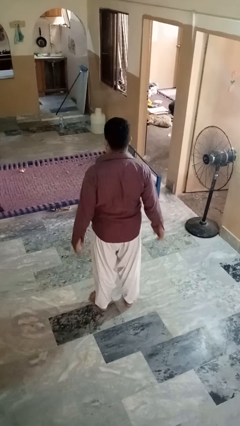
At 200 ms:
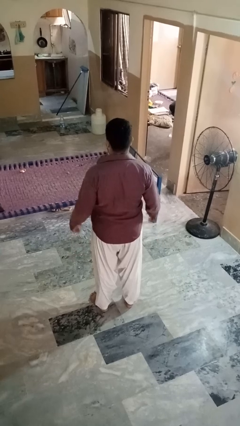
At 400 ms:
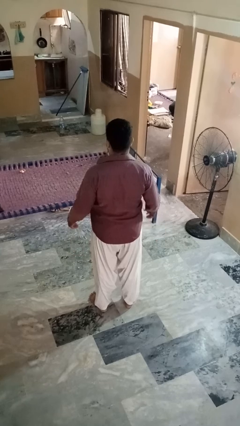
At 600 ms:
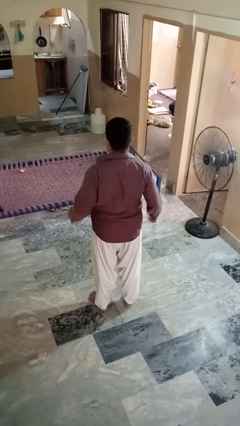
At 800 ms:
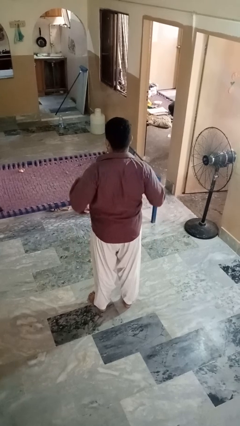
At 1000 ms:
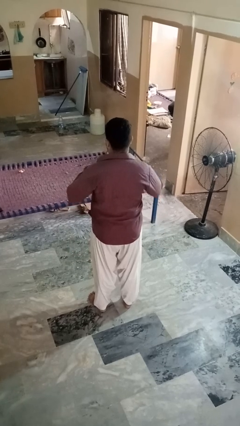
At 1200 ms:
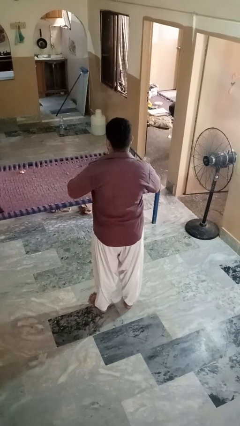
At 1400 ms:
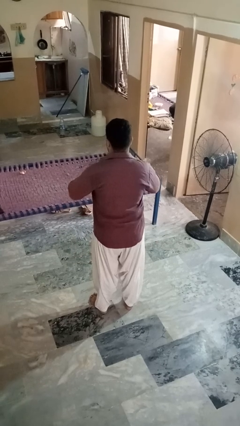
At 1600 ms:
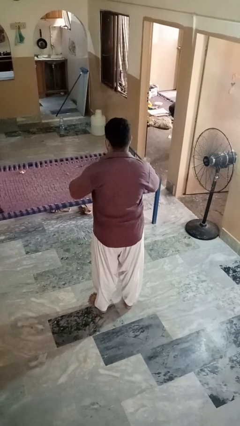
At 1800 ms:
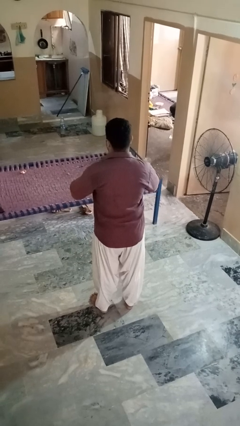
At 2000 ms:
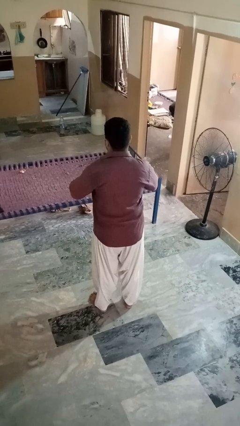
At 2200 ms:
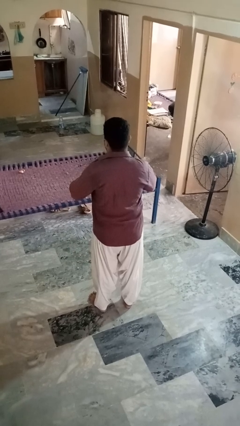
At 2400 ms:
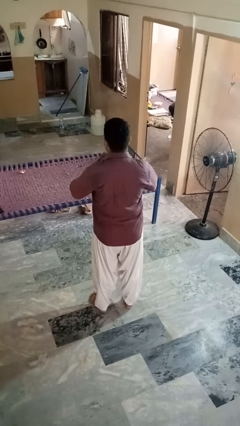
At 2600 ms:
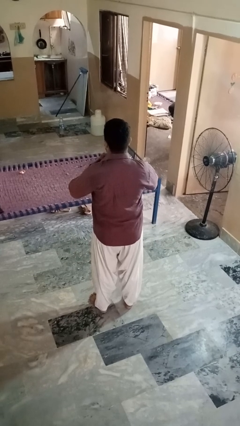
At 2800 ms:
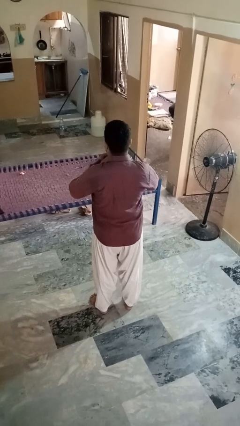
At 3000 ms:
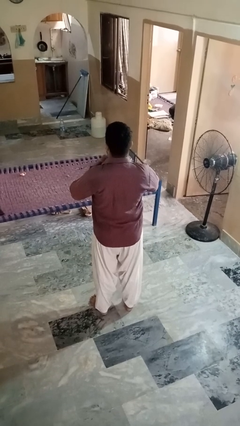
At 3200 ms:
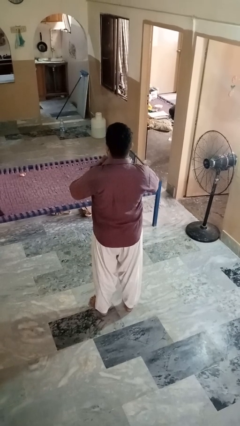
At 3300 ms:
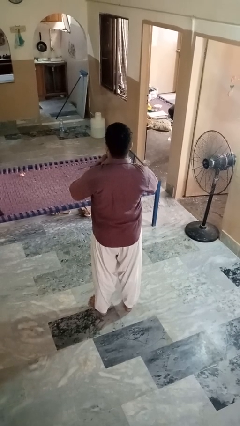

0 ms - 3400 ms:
person buttons shirt

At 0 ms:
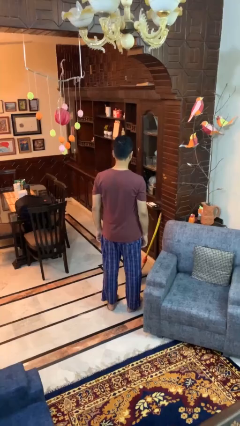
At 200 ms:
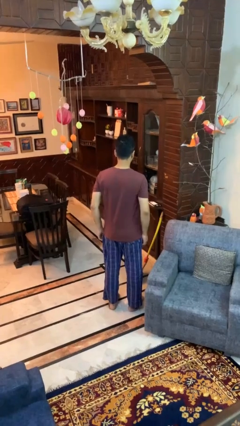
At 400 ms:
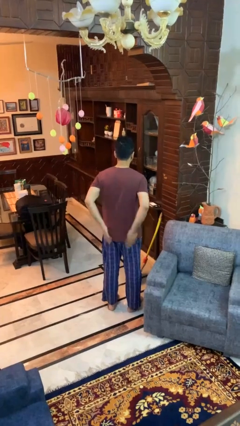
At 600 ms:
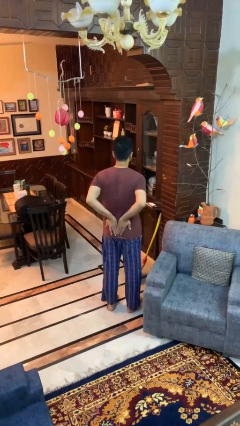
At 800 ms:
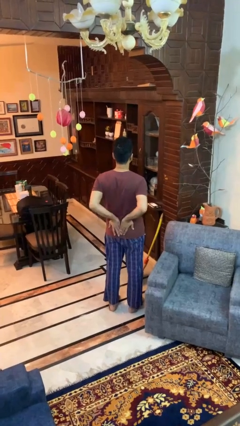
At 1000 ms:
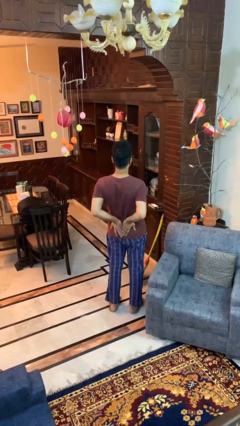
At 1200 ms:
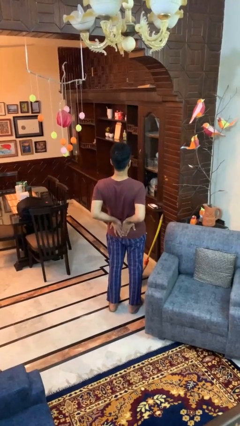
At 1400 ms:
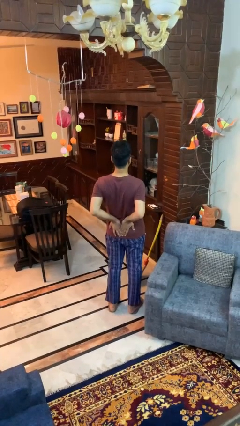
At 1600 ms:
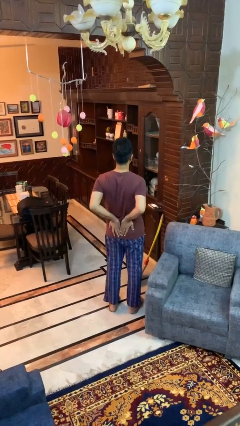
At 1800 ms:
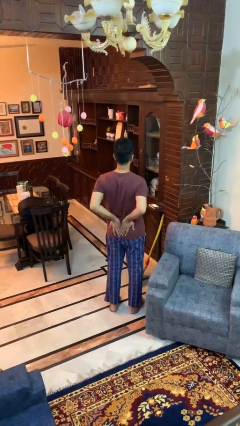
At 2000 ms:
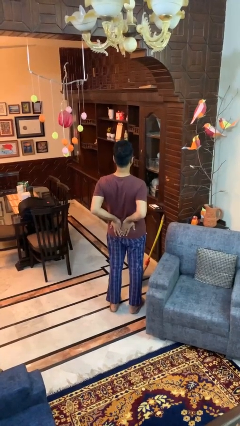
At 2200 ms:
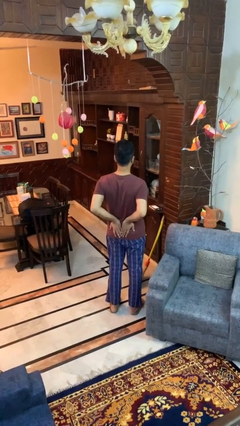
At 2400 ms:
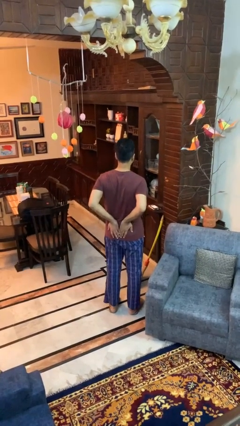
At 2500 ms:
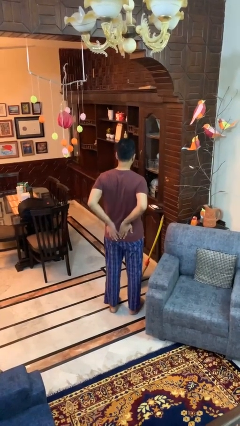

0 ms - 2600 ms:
person stretches back

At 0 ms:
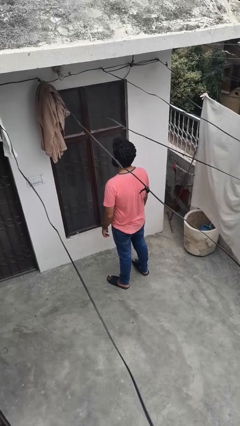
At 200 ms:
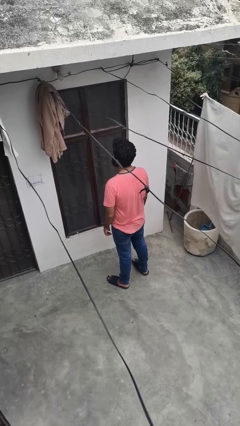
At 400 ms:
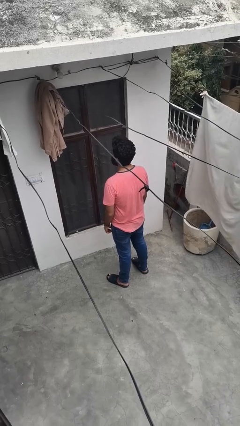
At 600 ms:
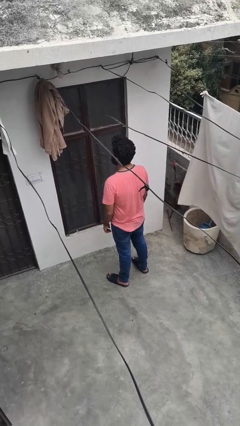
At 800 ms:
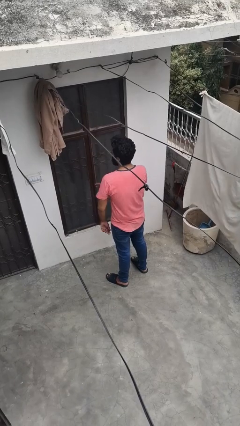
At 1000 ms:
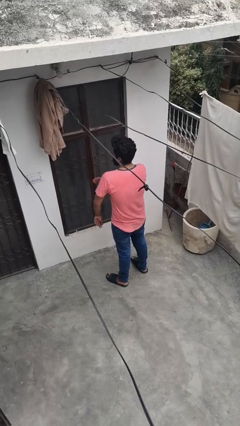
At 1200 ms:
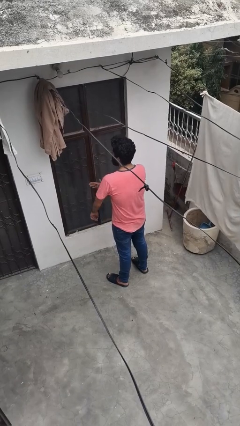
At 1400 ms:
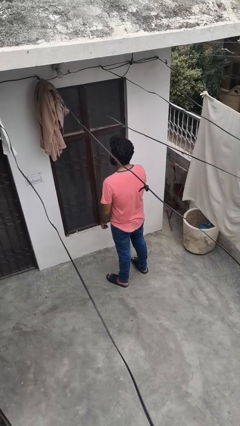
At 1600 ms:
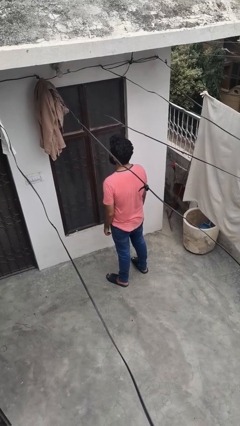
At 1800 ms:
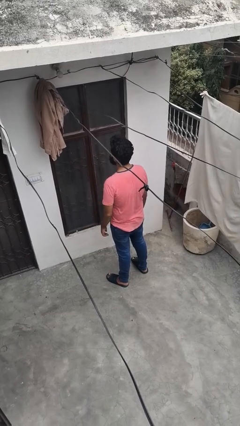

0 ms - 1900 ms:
person swats bug

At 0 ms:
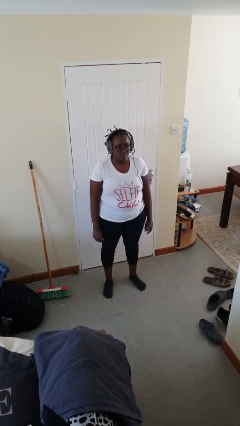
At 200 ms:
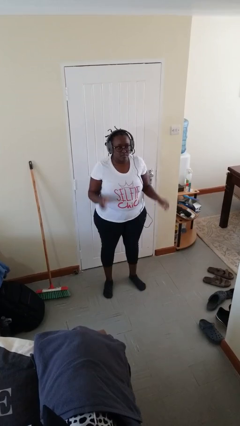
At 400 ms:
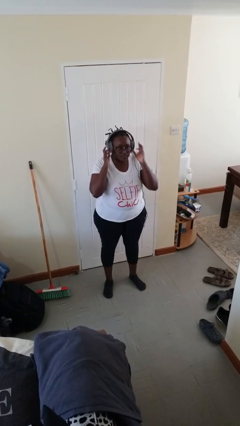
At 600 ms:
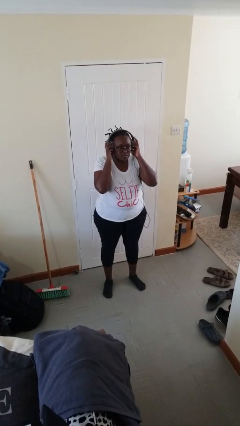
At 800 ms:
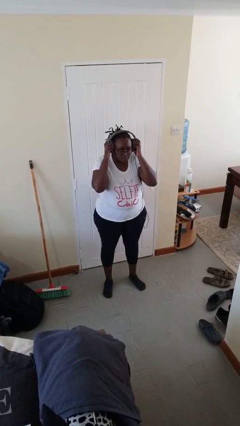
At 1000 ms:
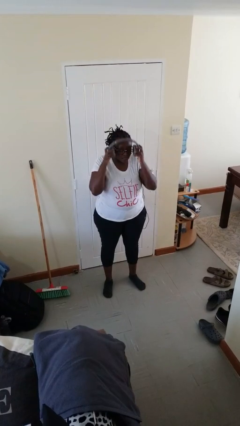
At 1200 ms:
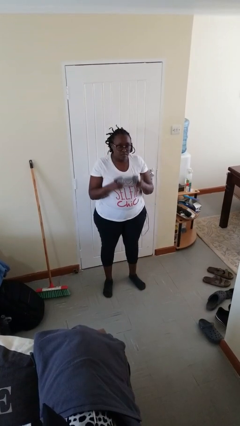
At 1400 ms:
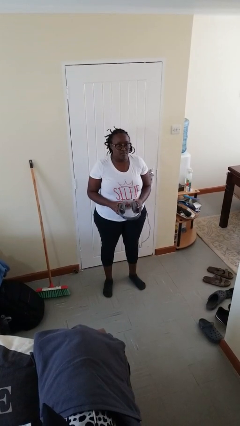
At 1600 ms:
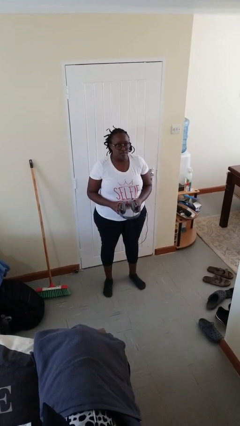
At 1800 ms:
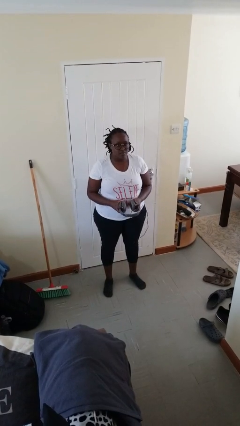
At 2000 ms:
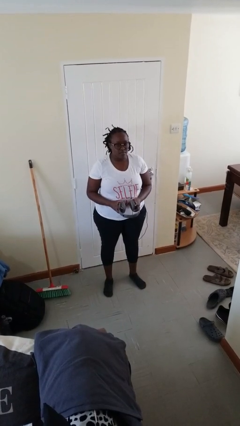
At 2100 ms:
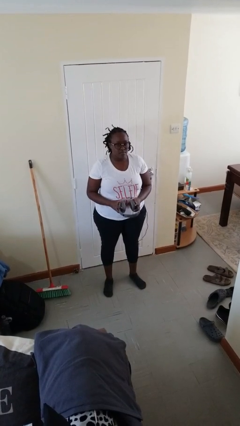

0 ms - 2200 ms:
person takes off headphones

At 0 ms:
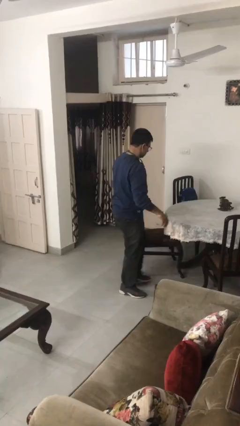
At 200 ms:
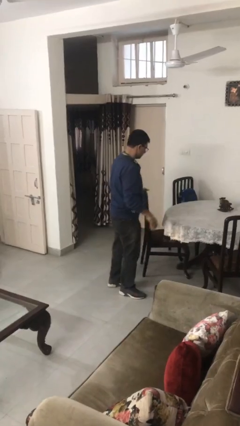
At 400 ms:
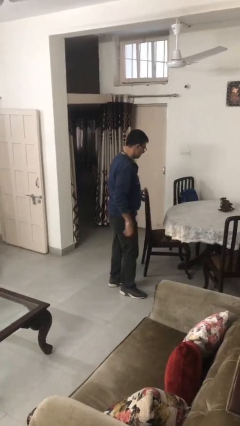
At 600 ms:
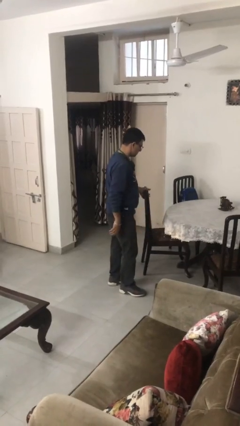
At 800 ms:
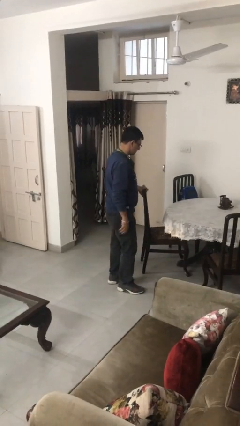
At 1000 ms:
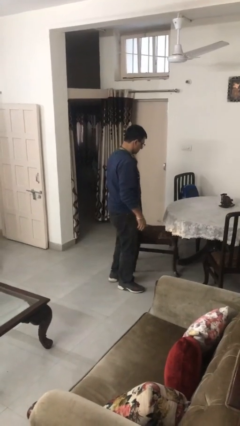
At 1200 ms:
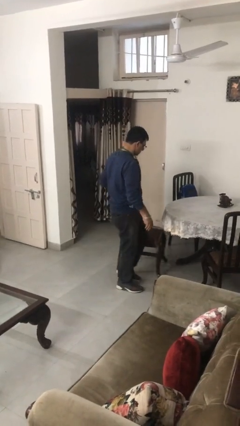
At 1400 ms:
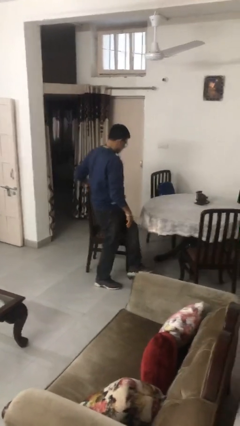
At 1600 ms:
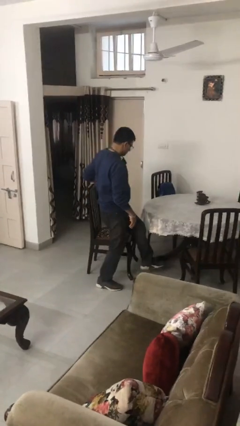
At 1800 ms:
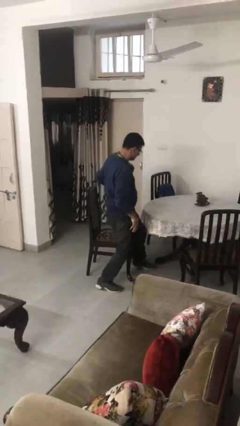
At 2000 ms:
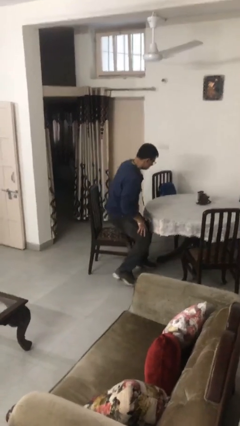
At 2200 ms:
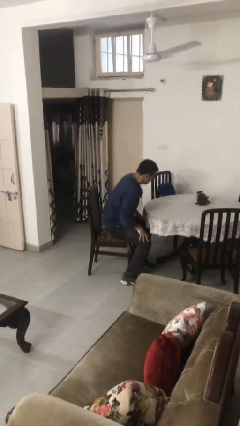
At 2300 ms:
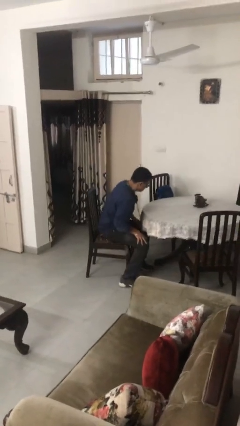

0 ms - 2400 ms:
person sits down

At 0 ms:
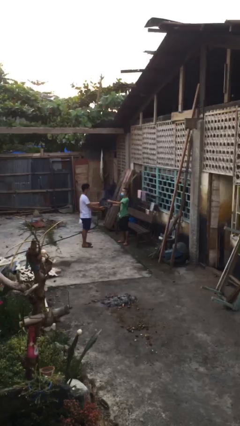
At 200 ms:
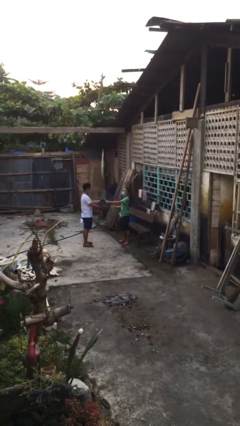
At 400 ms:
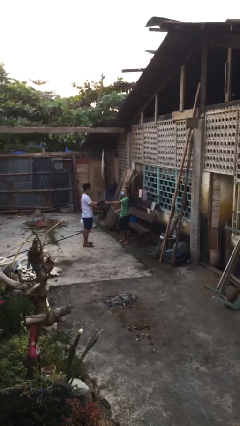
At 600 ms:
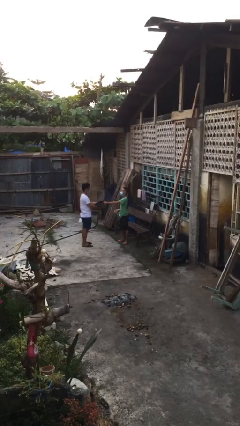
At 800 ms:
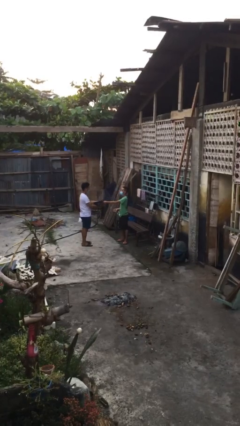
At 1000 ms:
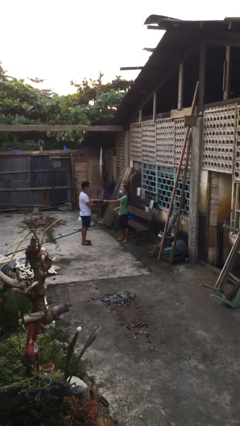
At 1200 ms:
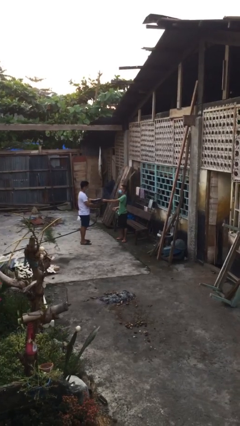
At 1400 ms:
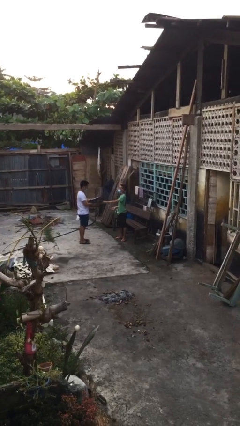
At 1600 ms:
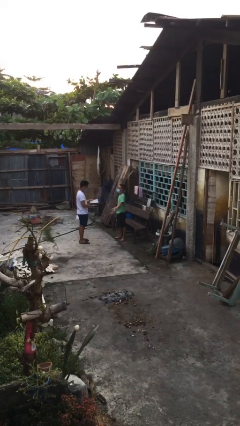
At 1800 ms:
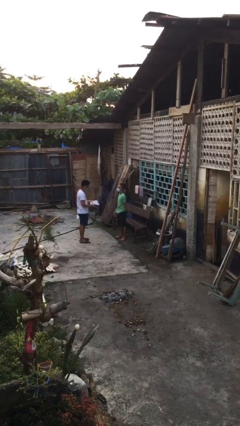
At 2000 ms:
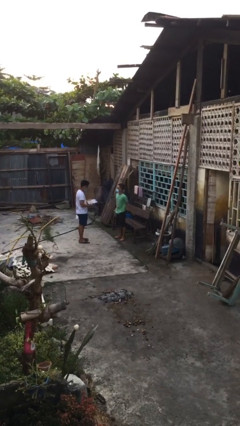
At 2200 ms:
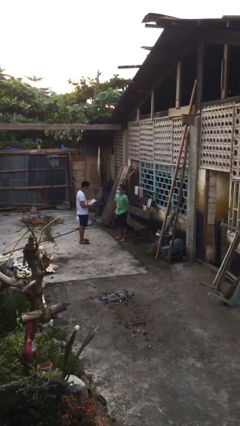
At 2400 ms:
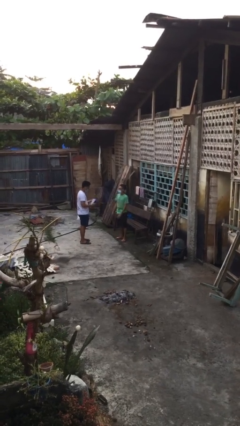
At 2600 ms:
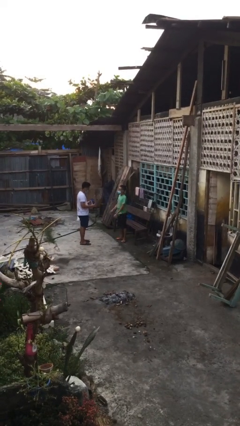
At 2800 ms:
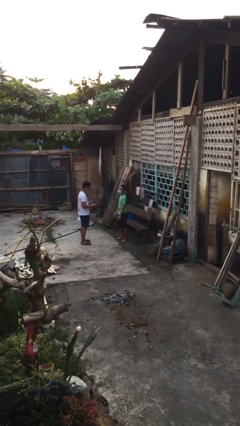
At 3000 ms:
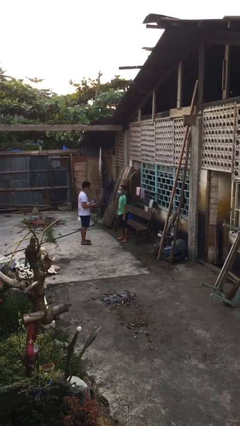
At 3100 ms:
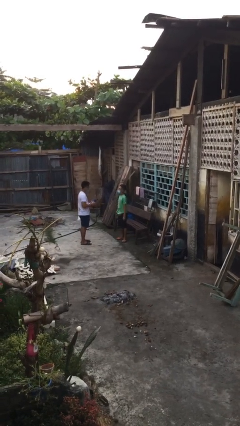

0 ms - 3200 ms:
person transfers object to person

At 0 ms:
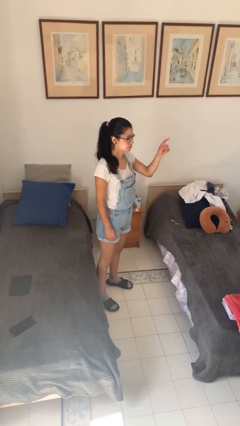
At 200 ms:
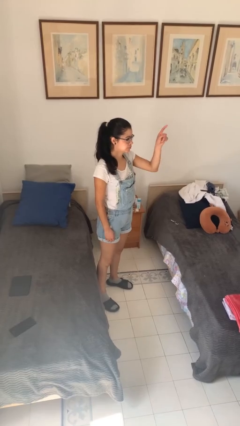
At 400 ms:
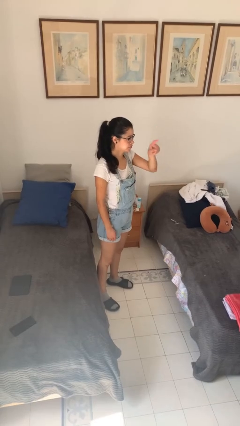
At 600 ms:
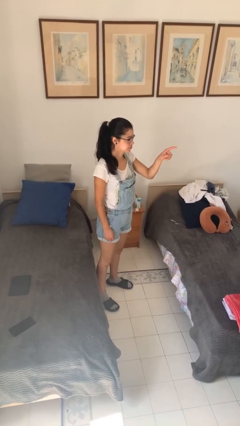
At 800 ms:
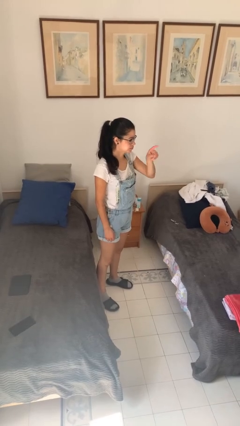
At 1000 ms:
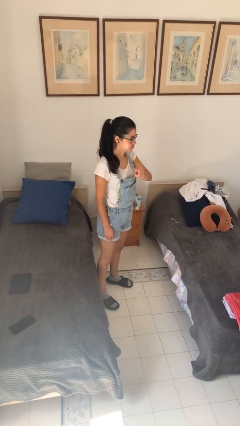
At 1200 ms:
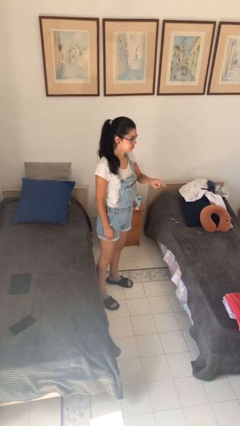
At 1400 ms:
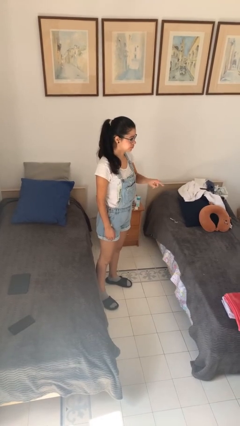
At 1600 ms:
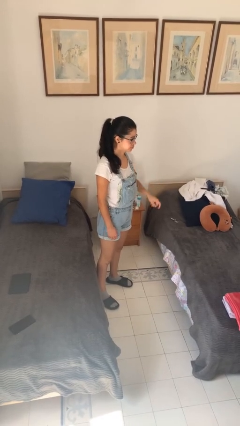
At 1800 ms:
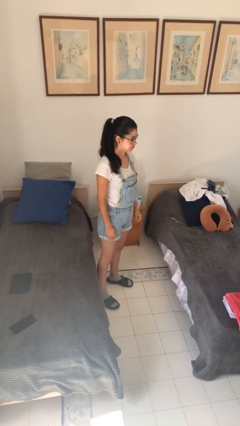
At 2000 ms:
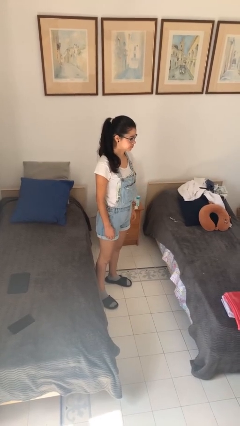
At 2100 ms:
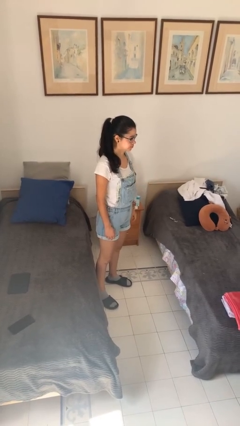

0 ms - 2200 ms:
person gestures number three
